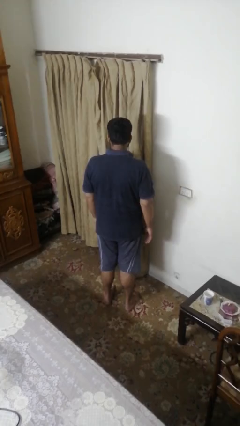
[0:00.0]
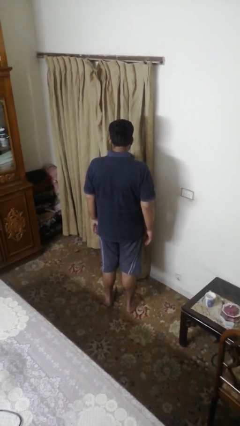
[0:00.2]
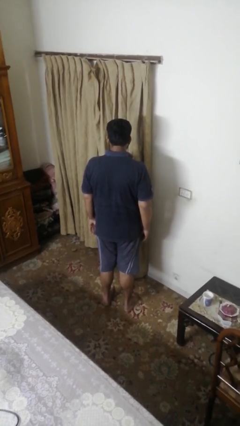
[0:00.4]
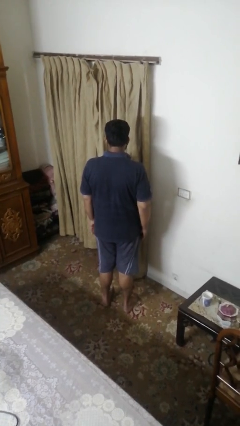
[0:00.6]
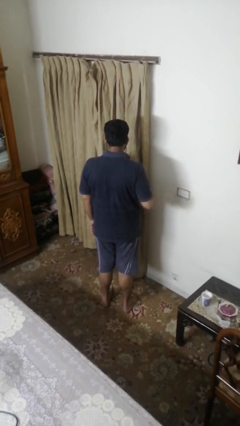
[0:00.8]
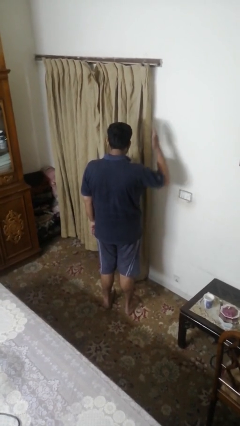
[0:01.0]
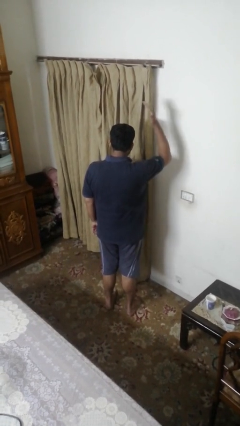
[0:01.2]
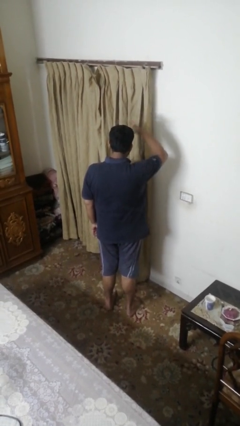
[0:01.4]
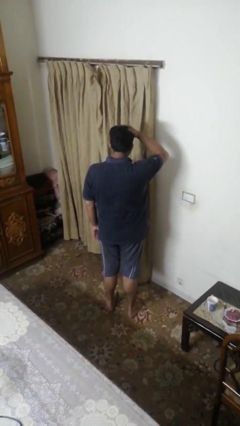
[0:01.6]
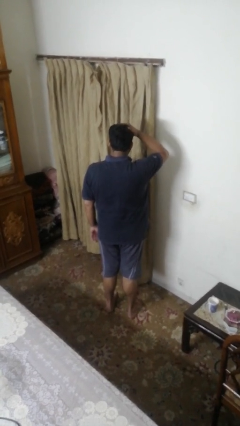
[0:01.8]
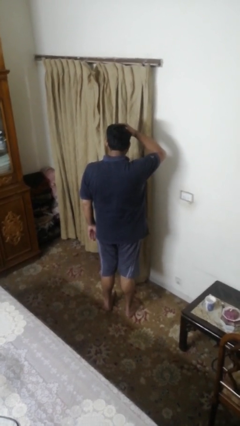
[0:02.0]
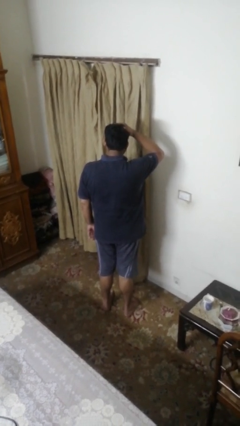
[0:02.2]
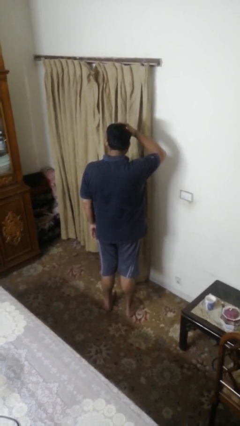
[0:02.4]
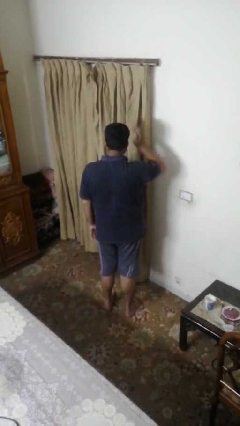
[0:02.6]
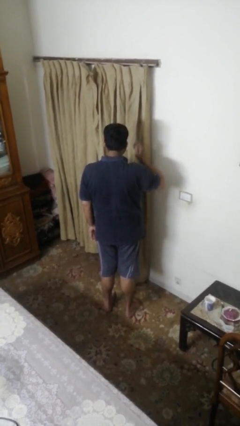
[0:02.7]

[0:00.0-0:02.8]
person pats head

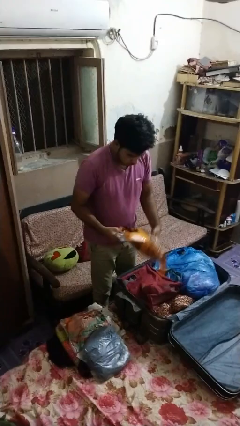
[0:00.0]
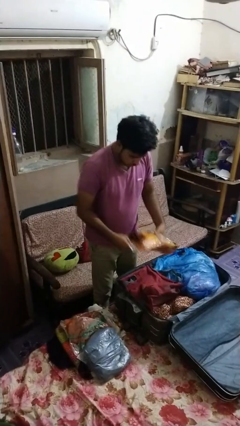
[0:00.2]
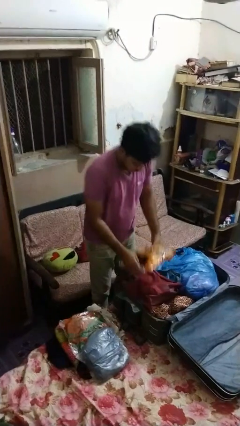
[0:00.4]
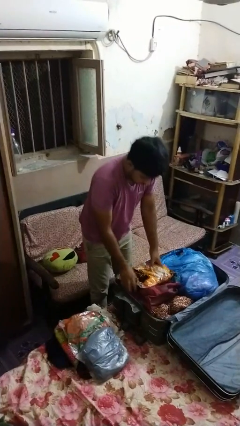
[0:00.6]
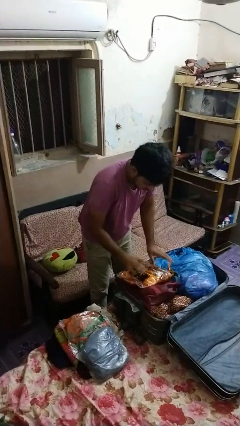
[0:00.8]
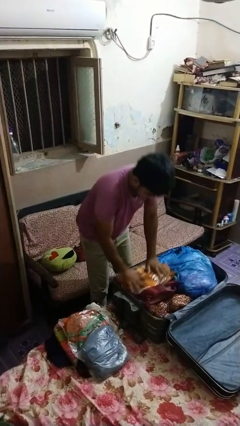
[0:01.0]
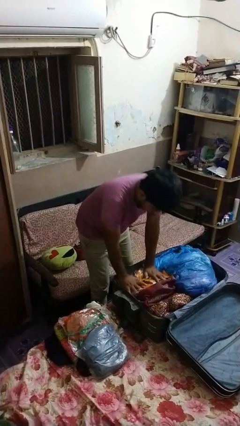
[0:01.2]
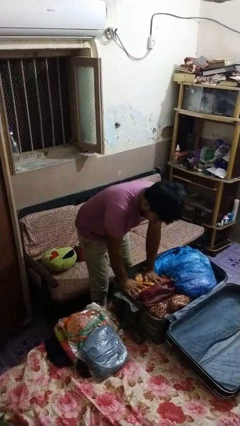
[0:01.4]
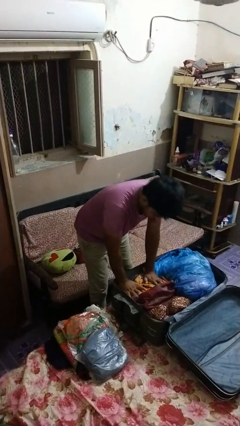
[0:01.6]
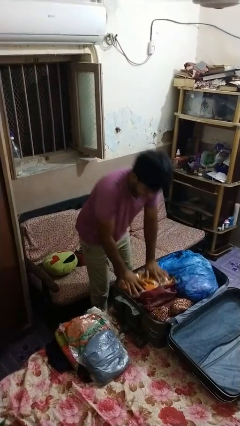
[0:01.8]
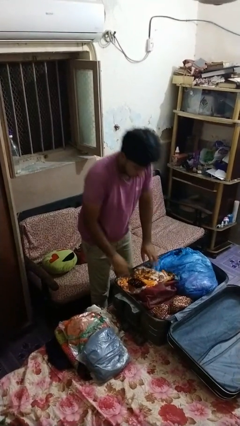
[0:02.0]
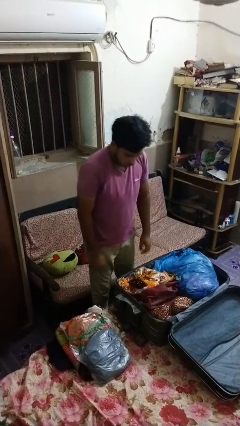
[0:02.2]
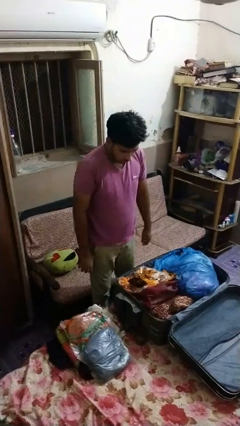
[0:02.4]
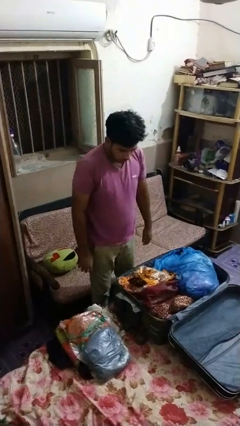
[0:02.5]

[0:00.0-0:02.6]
person loads clothes into suitcase

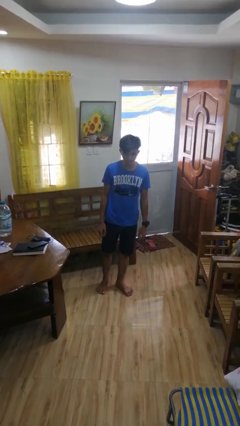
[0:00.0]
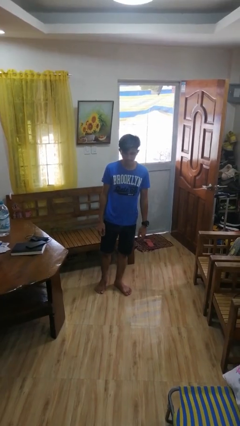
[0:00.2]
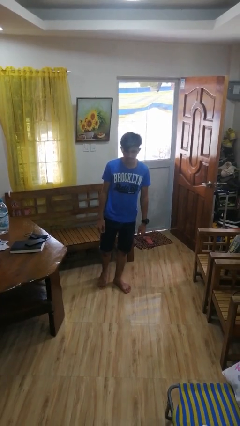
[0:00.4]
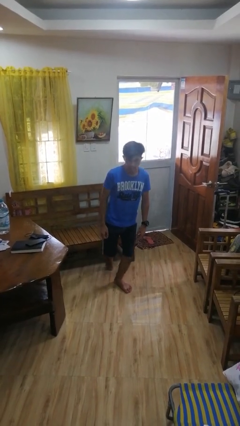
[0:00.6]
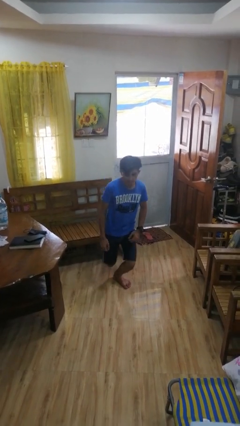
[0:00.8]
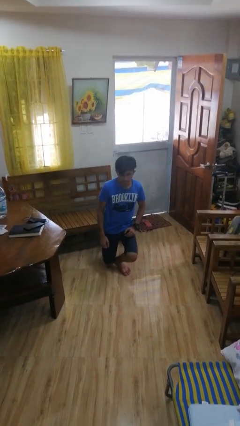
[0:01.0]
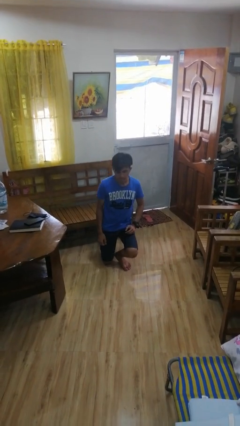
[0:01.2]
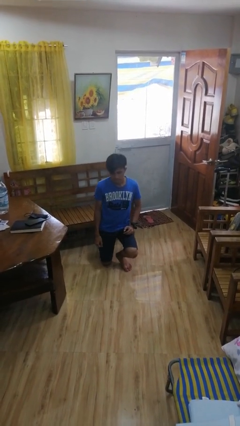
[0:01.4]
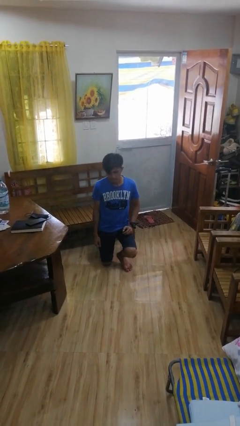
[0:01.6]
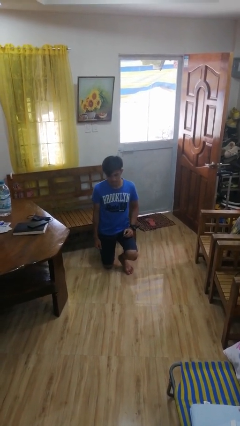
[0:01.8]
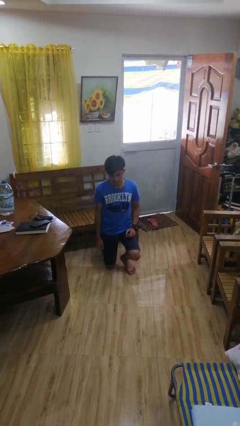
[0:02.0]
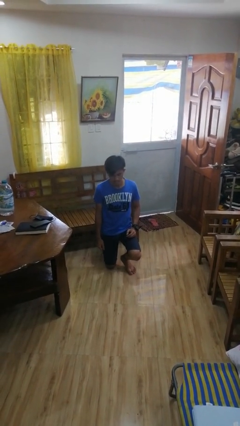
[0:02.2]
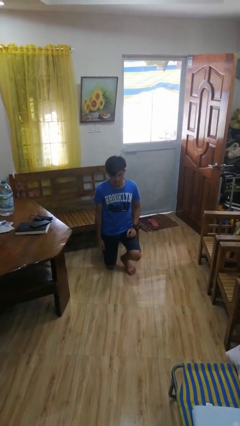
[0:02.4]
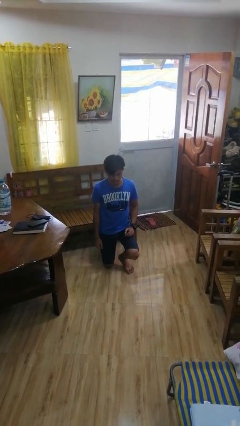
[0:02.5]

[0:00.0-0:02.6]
person kneels

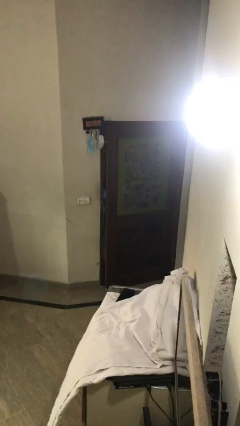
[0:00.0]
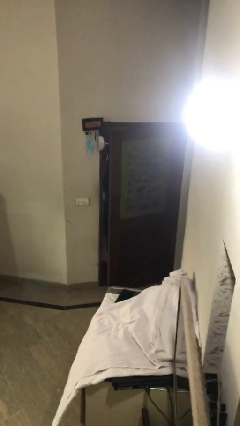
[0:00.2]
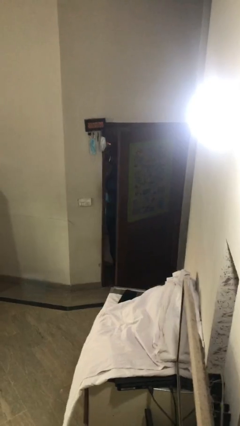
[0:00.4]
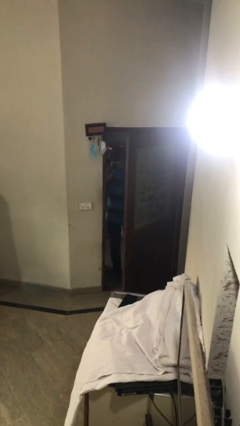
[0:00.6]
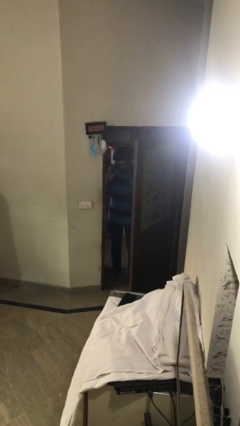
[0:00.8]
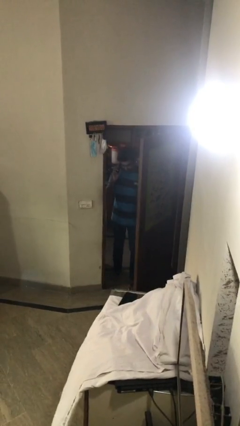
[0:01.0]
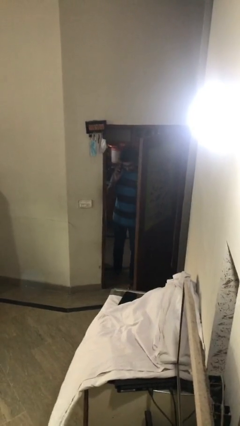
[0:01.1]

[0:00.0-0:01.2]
person opens facility door

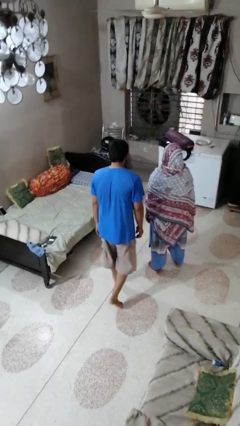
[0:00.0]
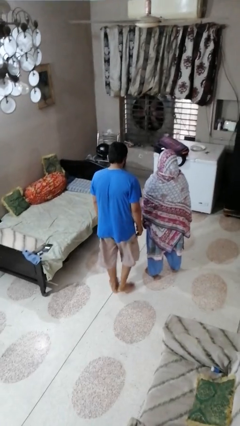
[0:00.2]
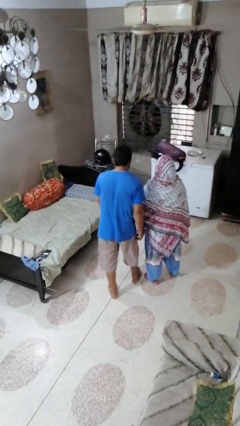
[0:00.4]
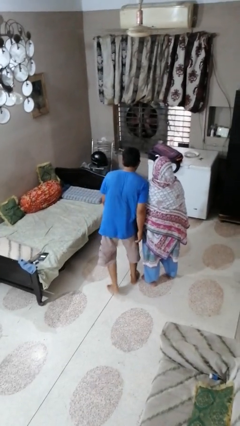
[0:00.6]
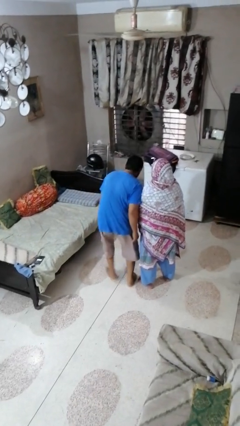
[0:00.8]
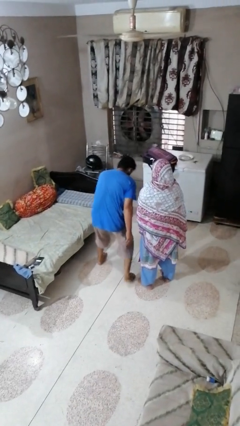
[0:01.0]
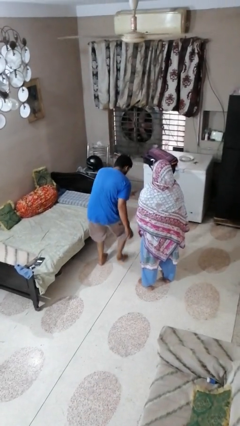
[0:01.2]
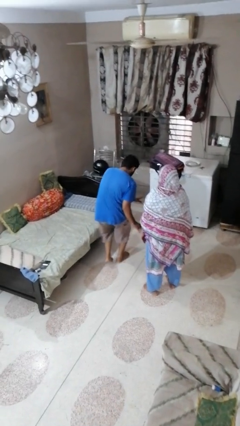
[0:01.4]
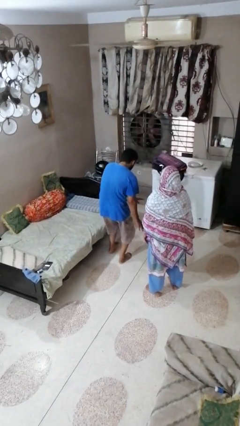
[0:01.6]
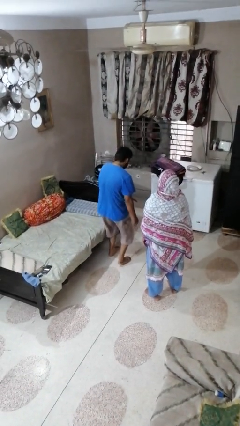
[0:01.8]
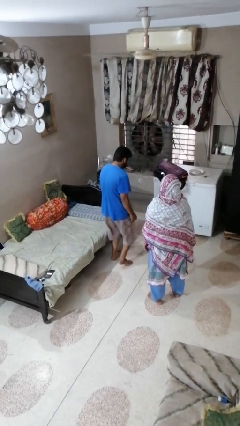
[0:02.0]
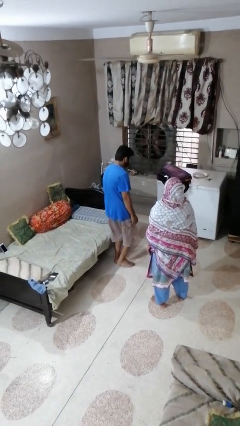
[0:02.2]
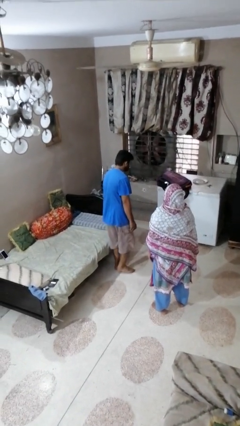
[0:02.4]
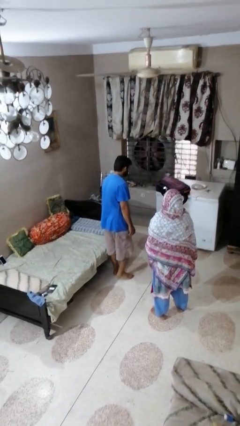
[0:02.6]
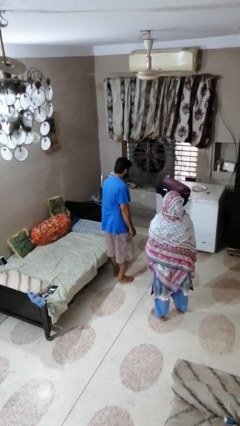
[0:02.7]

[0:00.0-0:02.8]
person bumps into person

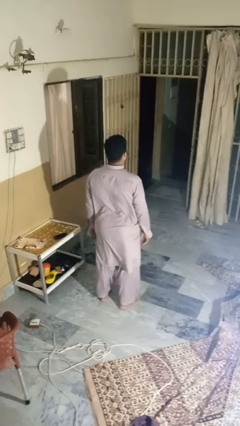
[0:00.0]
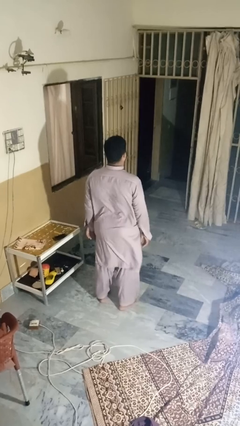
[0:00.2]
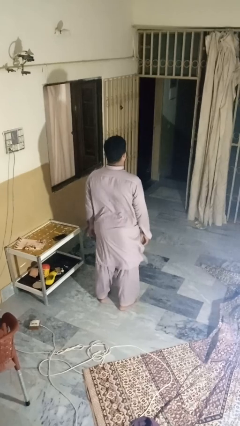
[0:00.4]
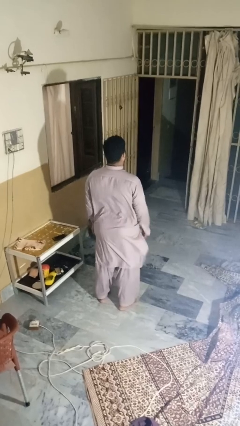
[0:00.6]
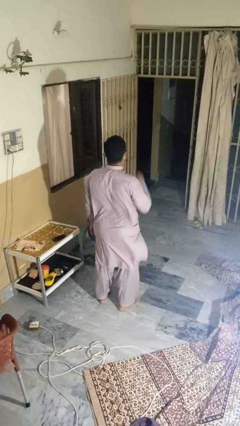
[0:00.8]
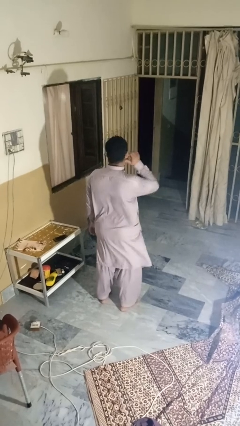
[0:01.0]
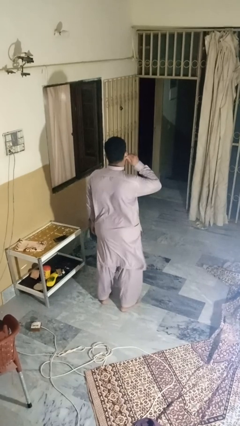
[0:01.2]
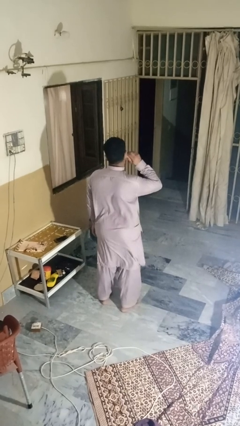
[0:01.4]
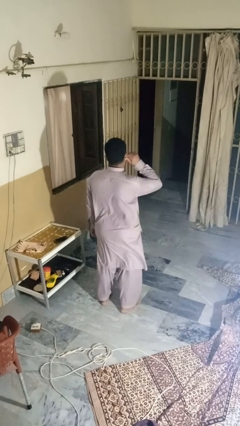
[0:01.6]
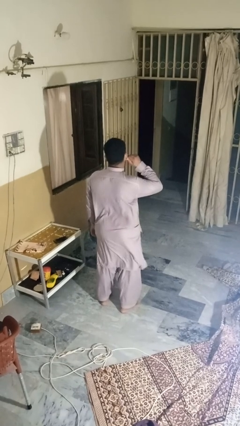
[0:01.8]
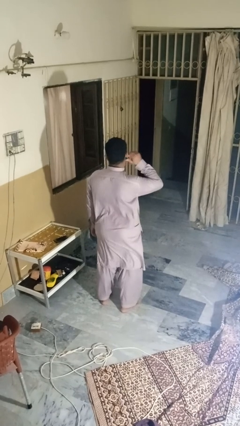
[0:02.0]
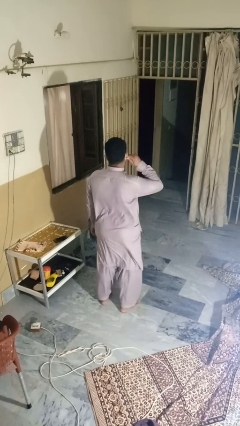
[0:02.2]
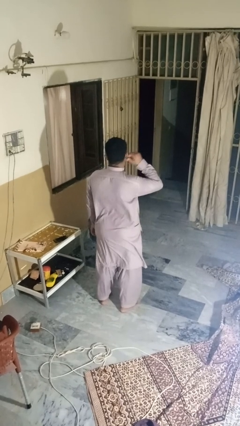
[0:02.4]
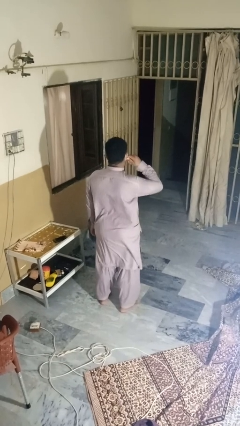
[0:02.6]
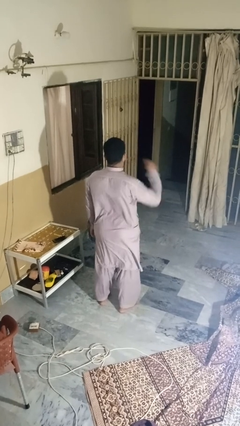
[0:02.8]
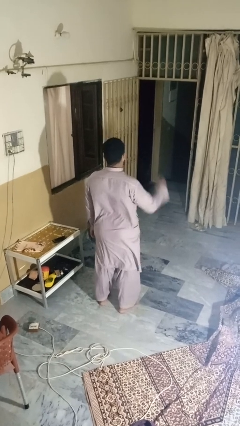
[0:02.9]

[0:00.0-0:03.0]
person touches earlobe

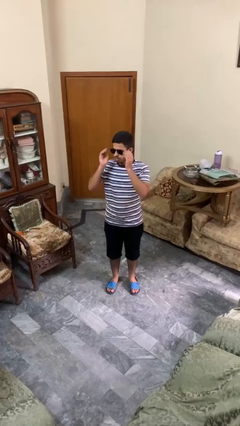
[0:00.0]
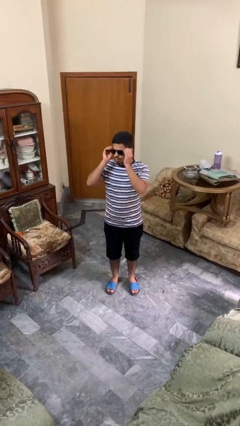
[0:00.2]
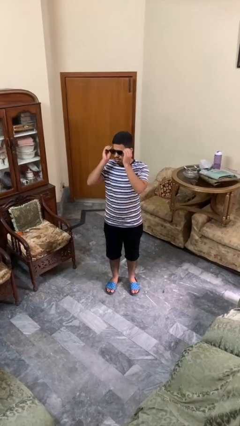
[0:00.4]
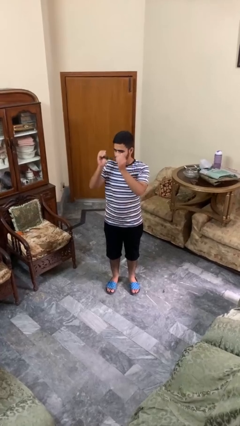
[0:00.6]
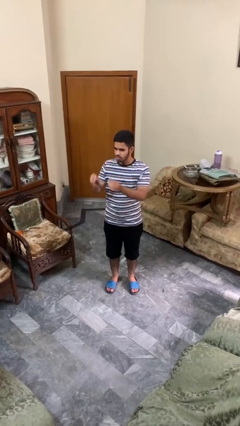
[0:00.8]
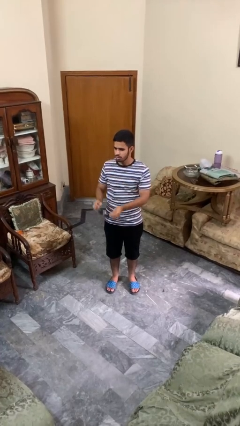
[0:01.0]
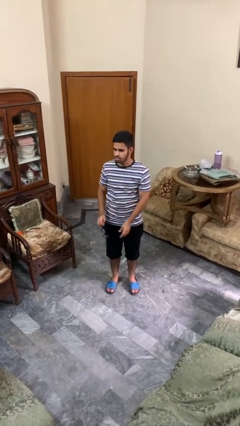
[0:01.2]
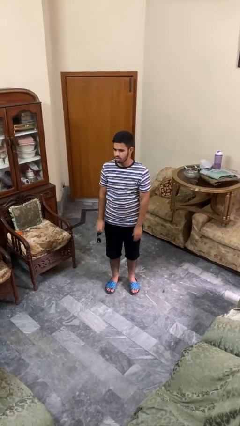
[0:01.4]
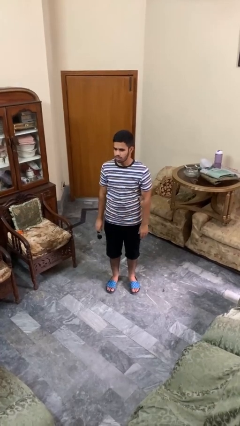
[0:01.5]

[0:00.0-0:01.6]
person takes off sunglasses

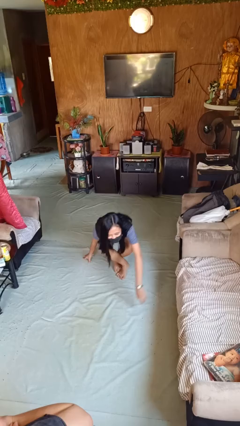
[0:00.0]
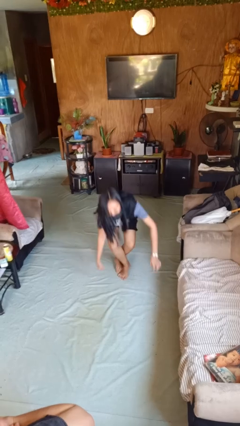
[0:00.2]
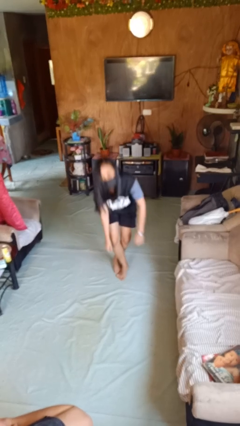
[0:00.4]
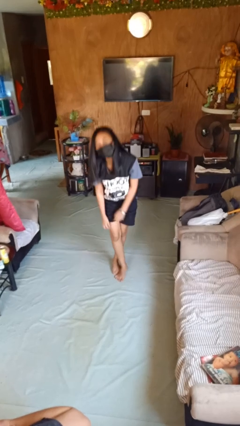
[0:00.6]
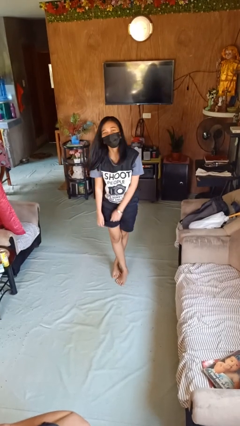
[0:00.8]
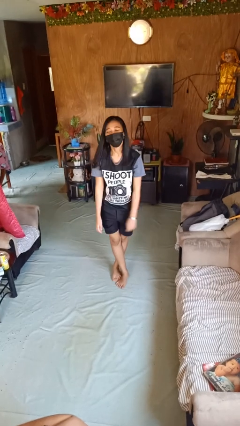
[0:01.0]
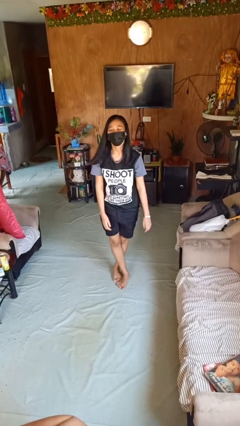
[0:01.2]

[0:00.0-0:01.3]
person stands up from floor
